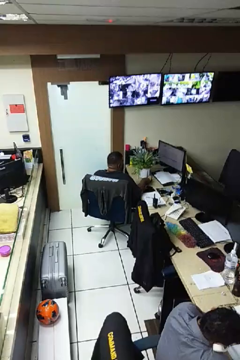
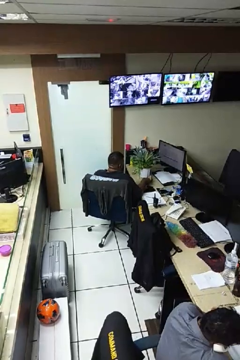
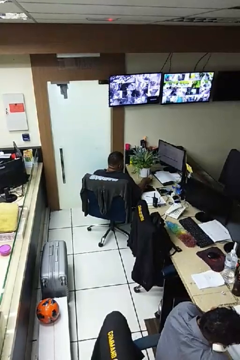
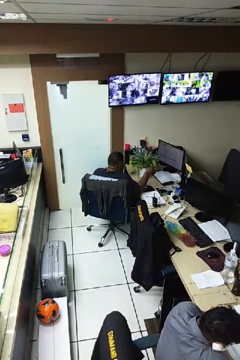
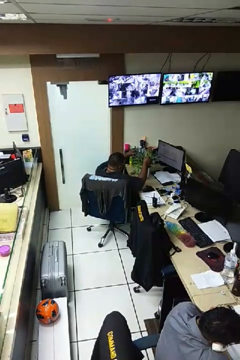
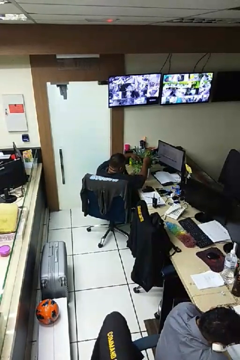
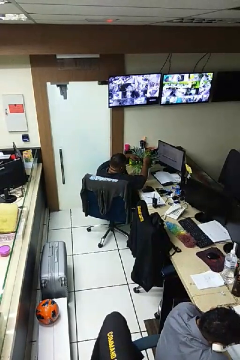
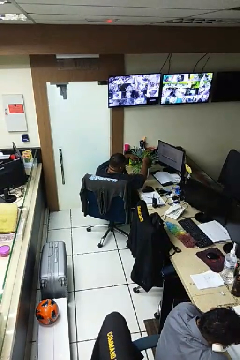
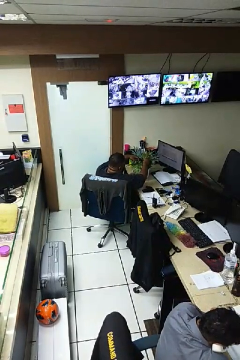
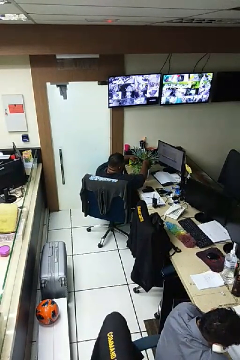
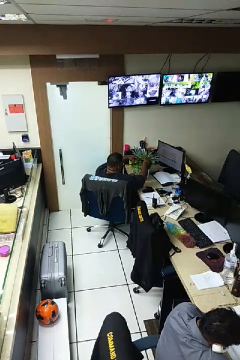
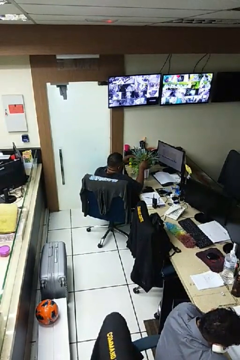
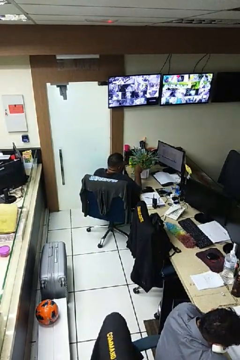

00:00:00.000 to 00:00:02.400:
person arranges flowers in vase

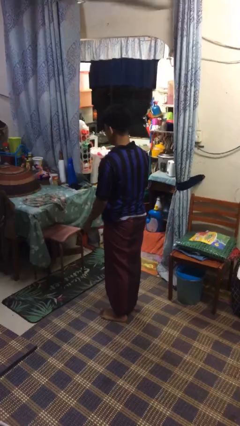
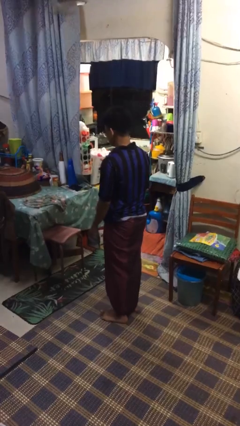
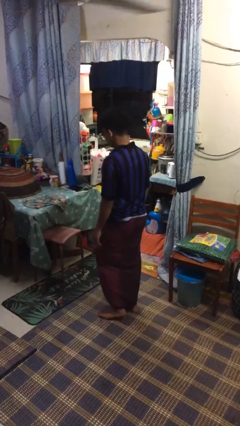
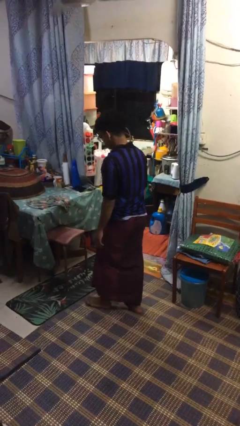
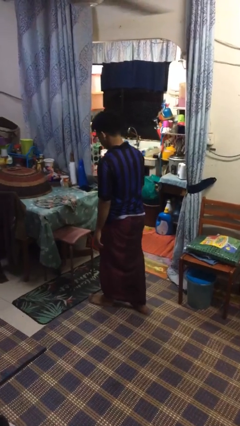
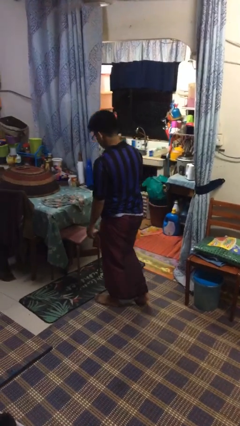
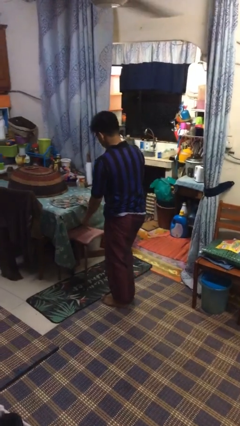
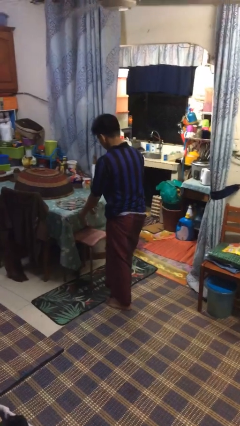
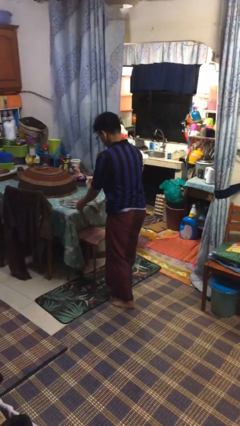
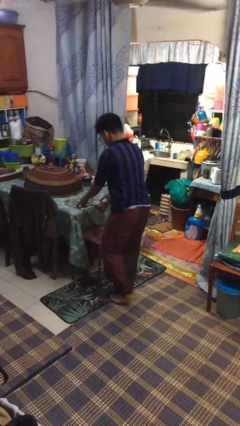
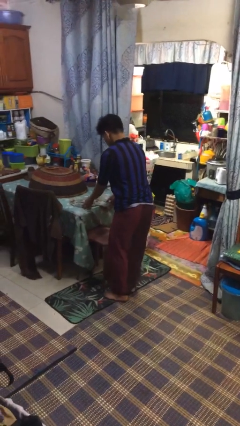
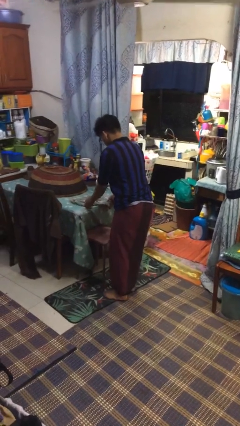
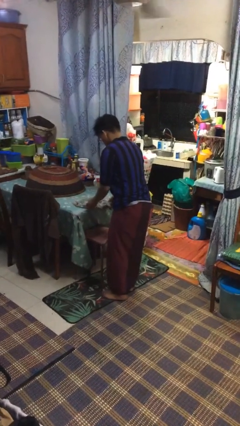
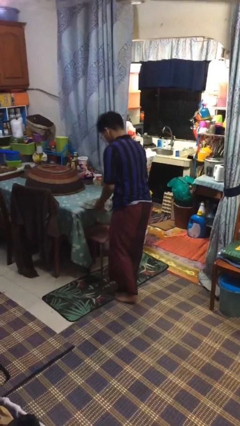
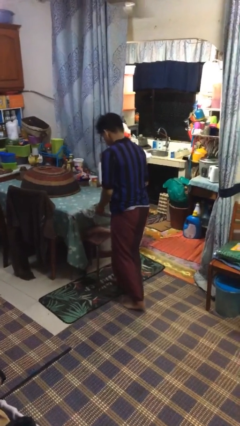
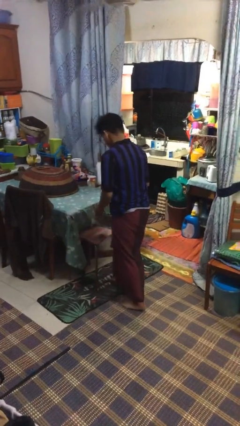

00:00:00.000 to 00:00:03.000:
person picks up object from table

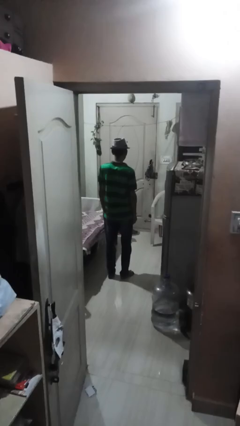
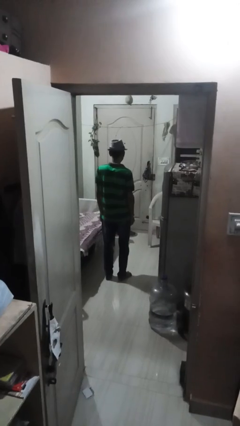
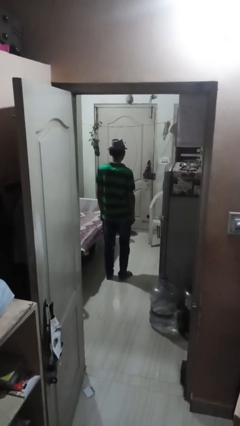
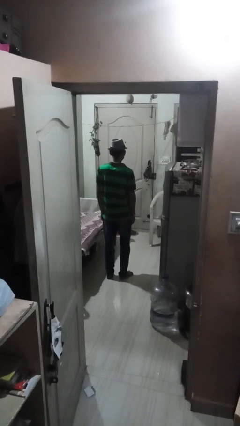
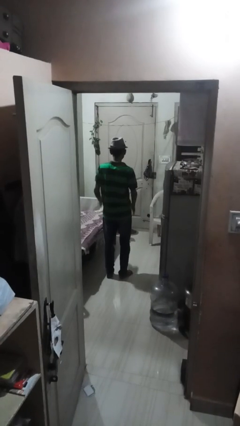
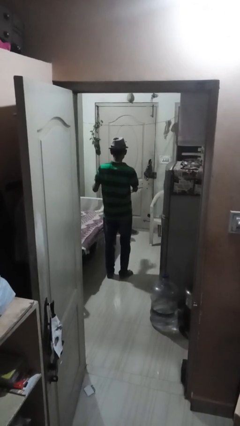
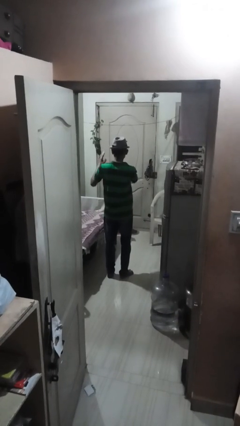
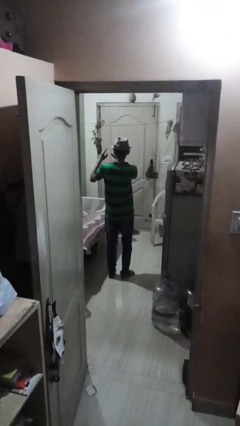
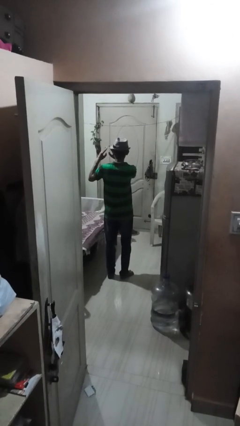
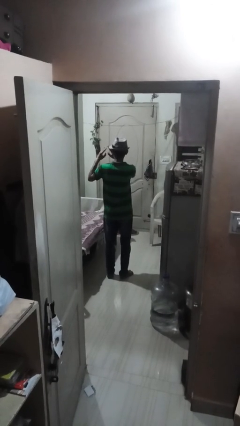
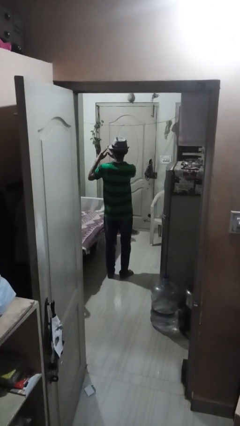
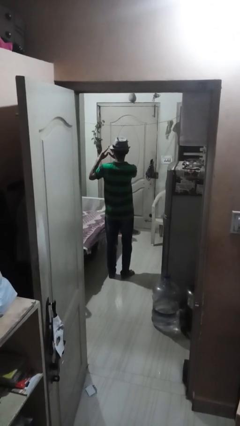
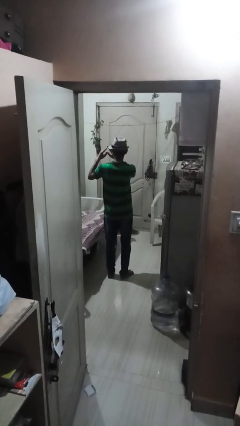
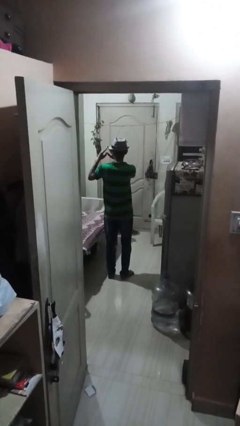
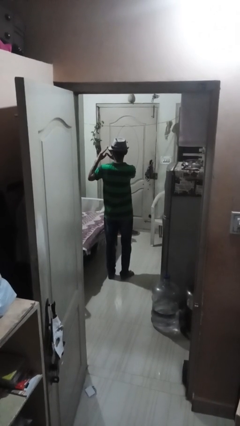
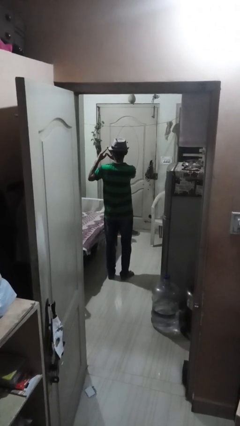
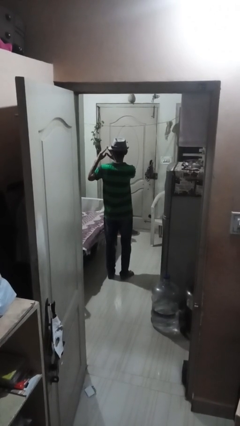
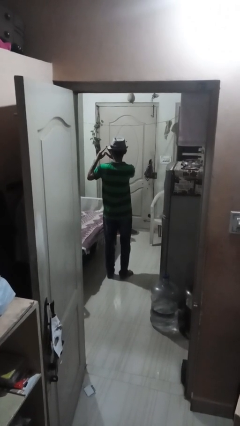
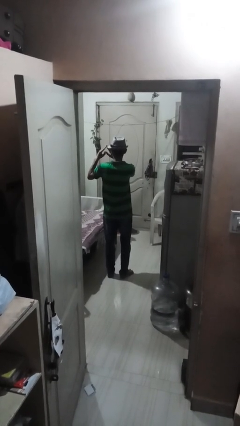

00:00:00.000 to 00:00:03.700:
person gestures heart

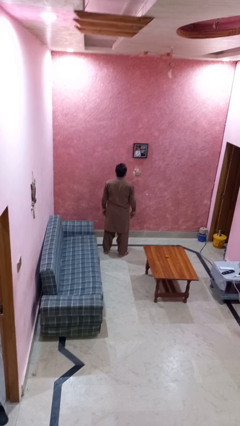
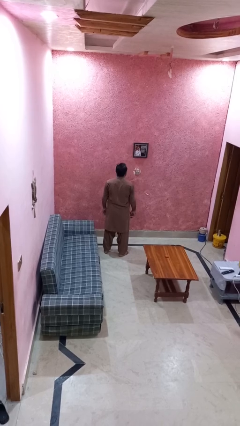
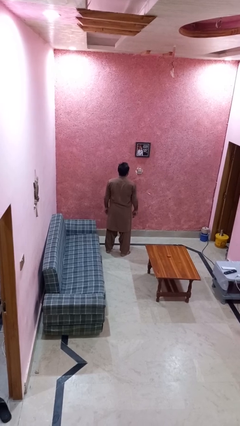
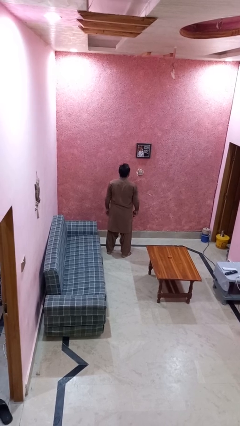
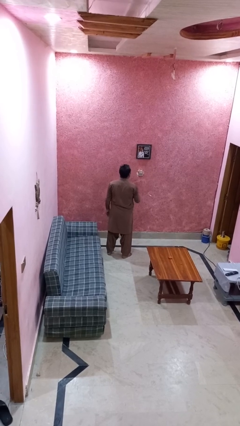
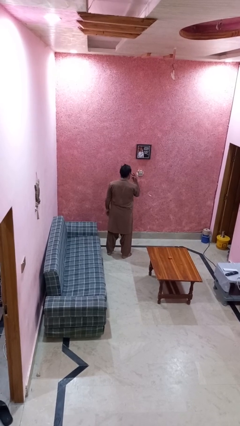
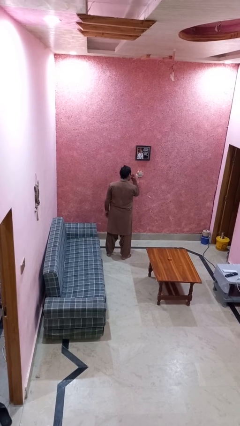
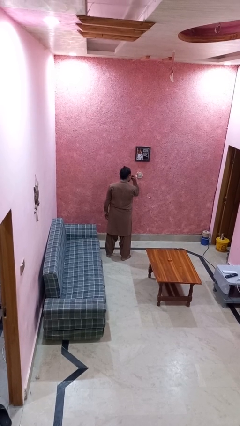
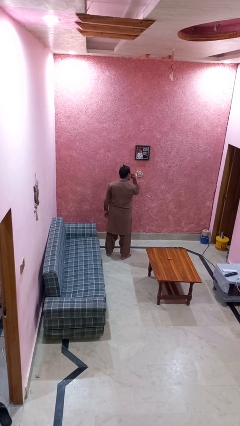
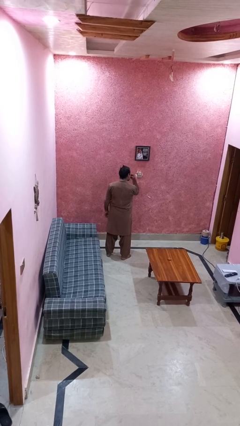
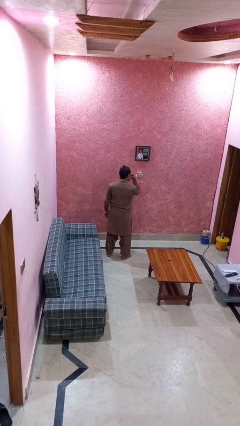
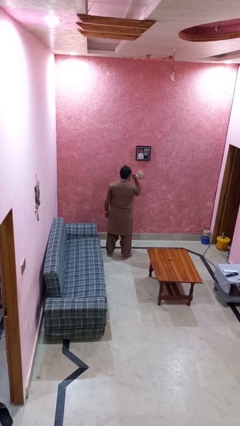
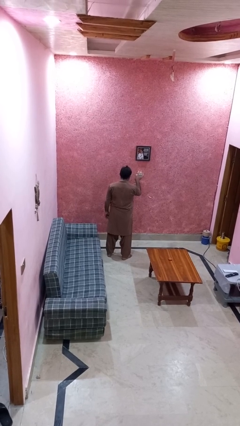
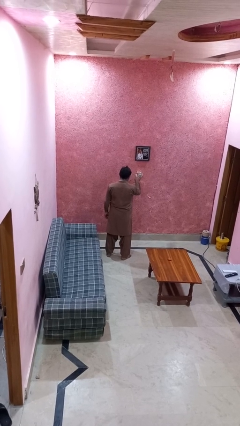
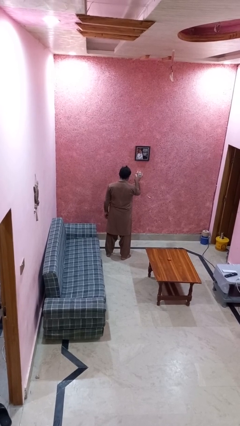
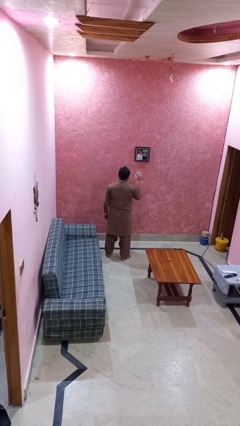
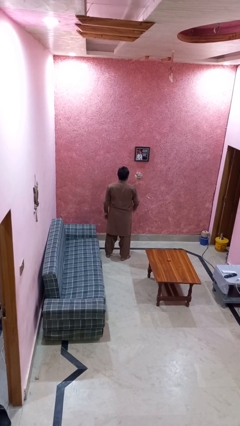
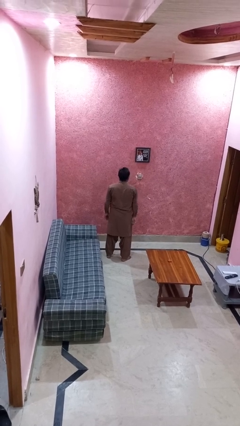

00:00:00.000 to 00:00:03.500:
person gestures watch closely

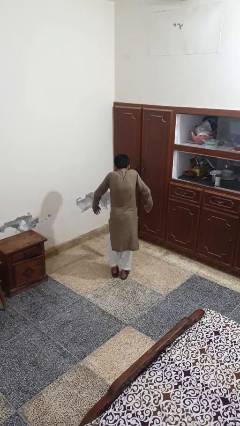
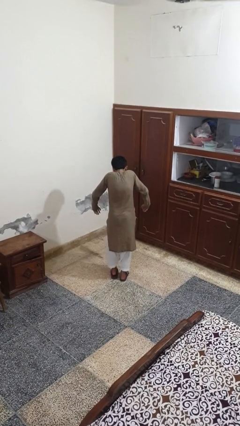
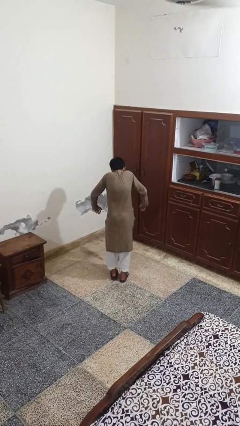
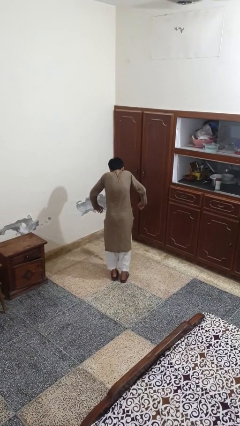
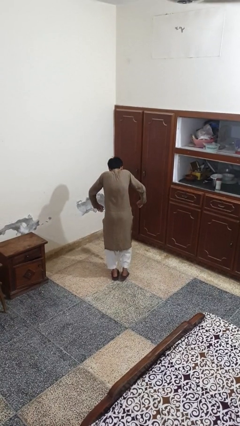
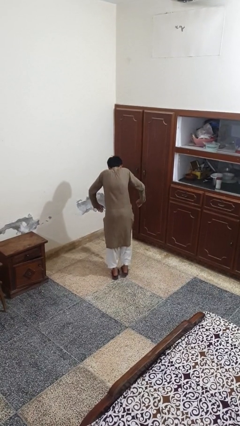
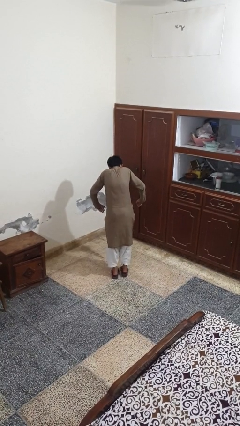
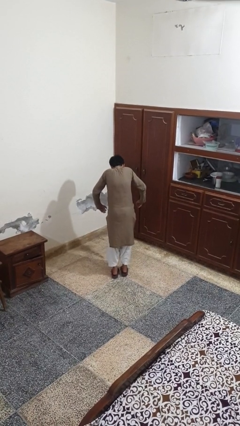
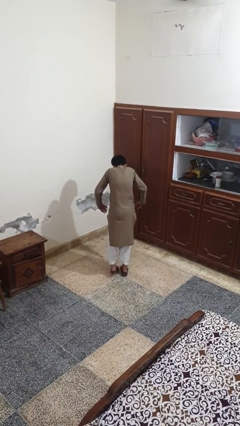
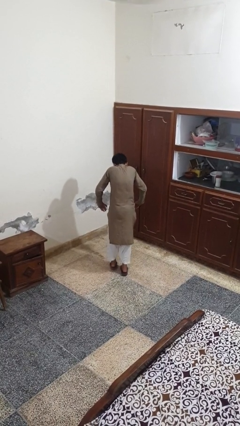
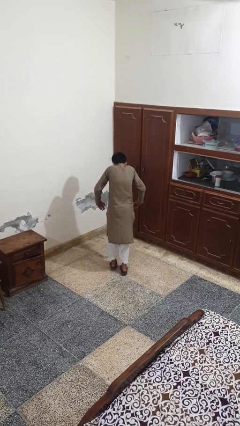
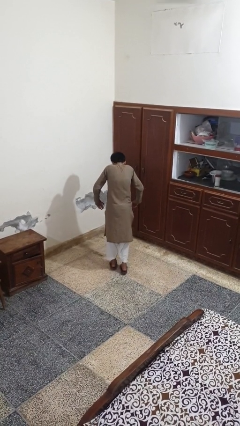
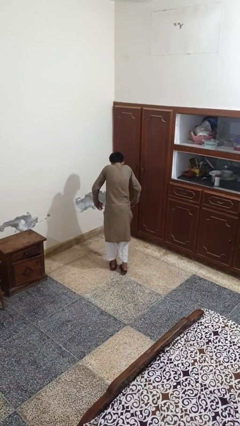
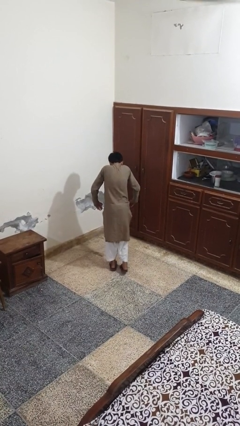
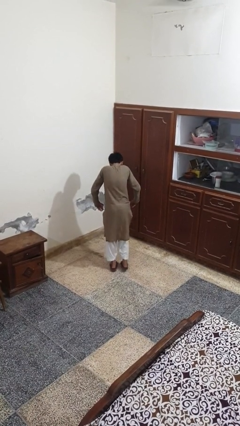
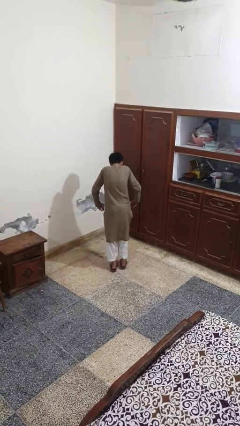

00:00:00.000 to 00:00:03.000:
person walks tiptoe

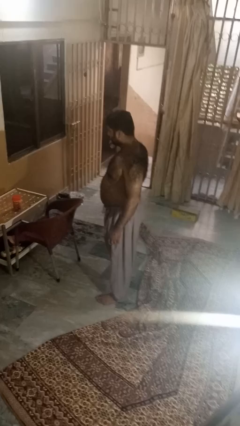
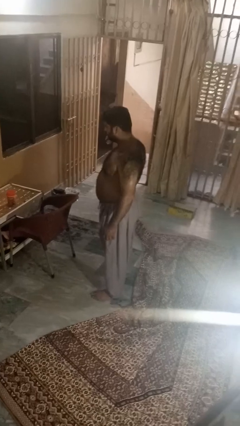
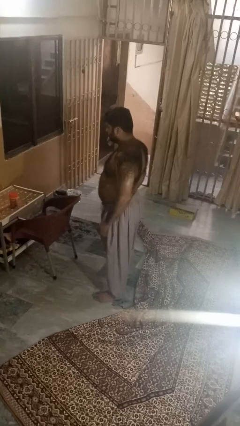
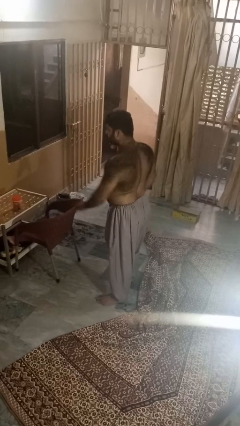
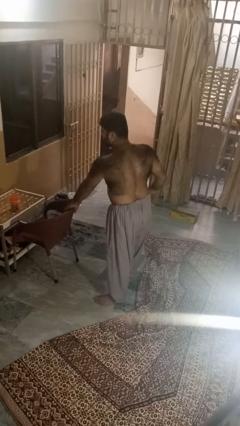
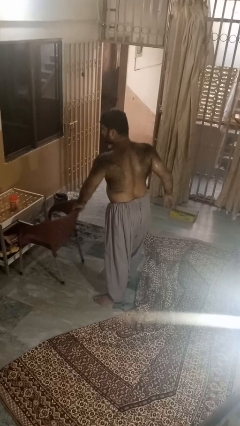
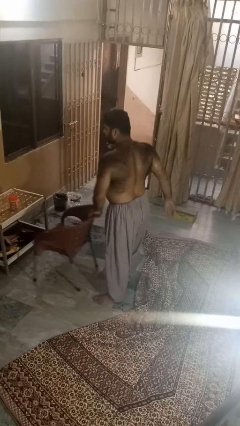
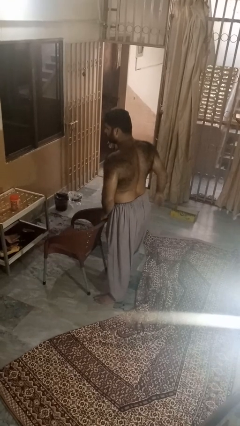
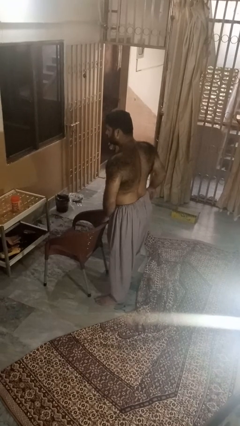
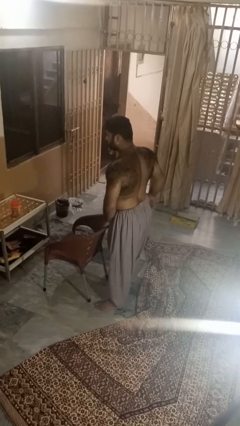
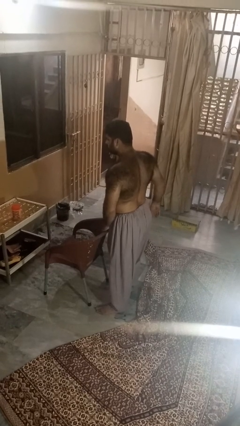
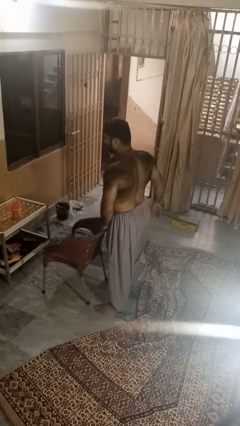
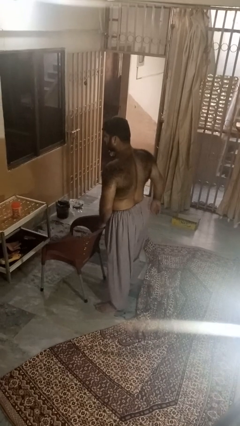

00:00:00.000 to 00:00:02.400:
person pulls out chair
